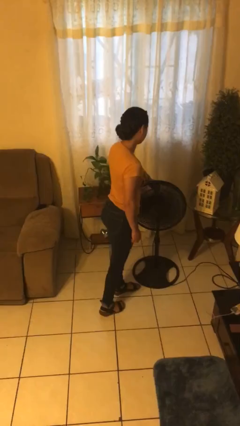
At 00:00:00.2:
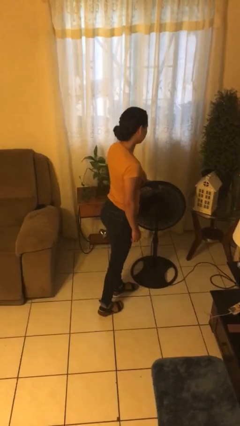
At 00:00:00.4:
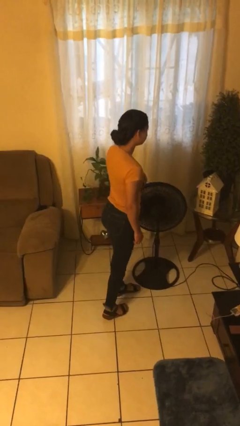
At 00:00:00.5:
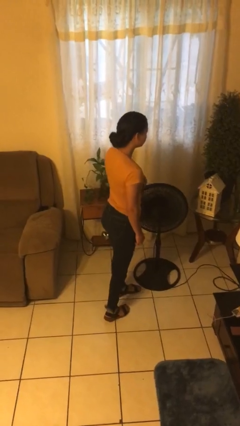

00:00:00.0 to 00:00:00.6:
person turns off fan

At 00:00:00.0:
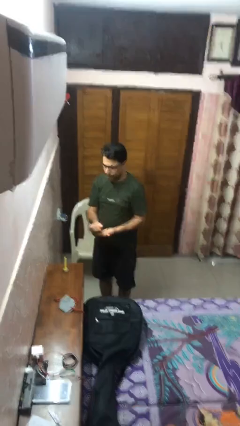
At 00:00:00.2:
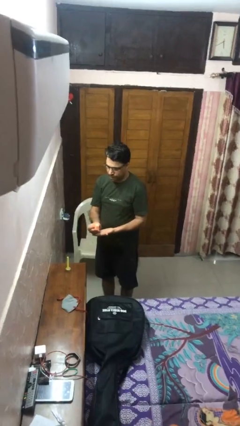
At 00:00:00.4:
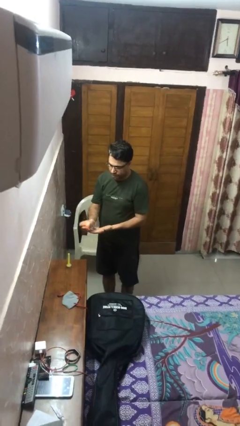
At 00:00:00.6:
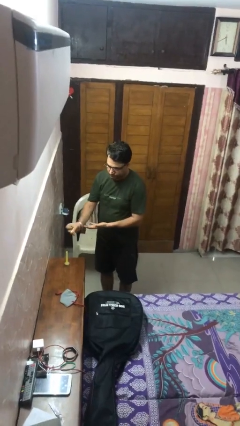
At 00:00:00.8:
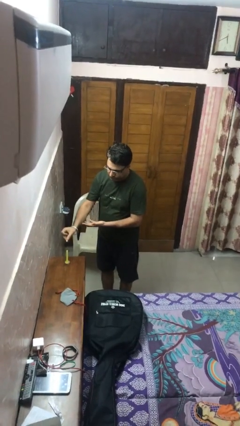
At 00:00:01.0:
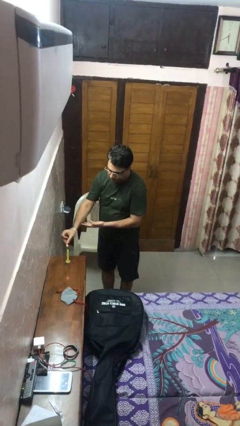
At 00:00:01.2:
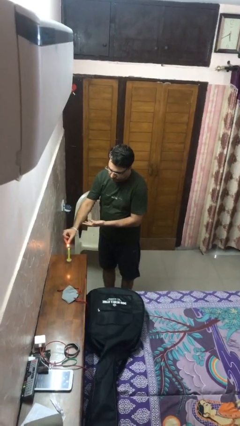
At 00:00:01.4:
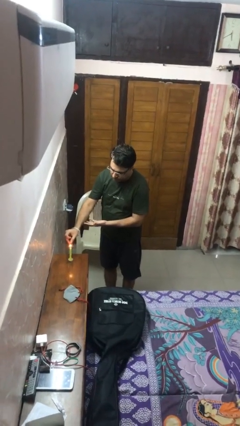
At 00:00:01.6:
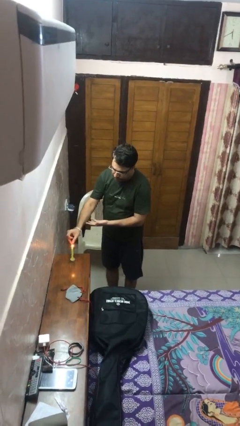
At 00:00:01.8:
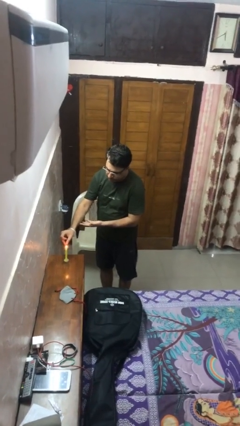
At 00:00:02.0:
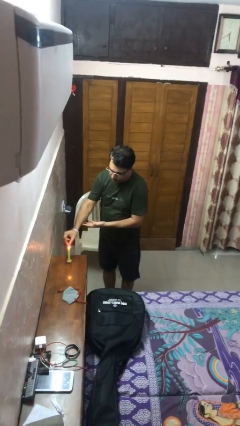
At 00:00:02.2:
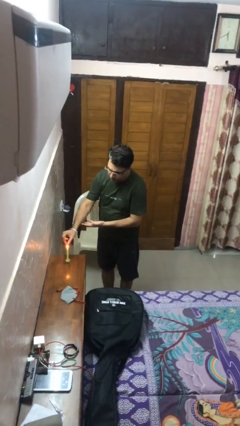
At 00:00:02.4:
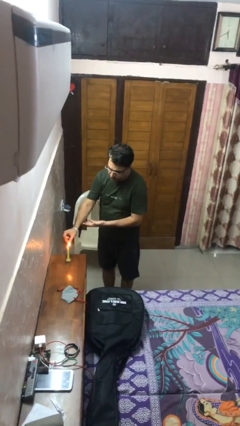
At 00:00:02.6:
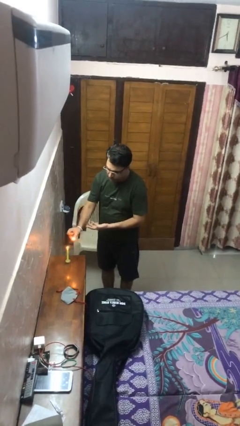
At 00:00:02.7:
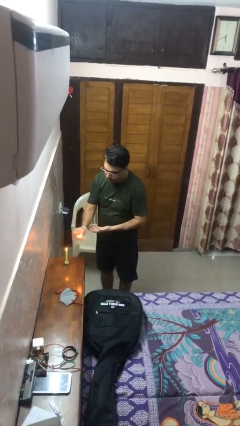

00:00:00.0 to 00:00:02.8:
person lights candle

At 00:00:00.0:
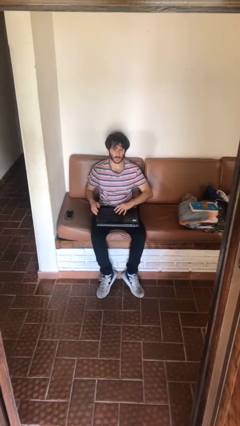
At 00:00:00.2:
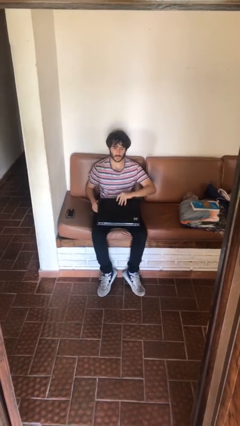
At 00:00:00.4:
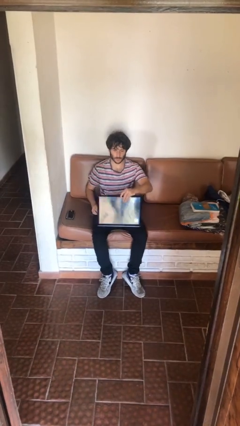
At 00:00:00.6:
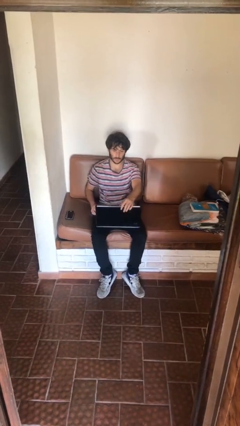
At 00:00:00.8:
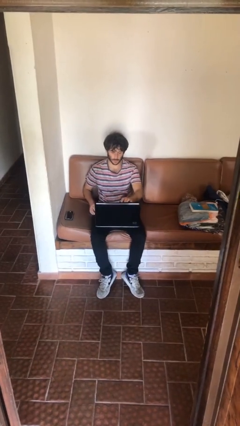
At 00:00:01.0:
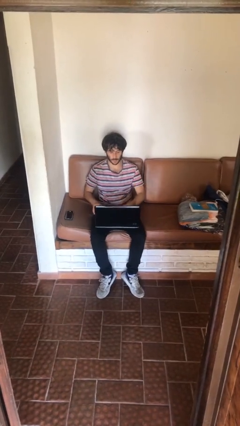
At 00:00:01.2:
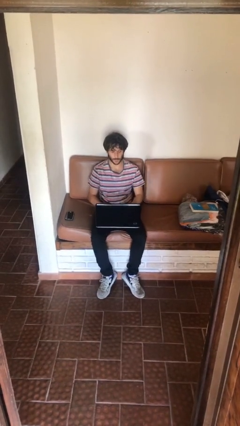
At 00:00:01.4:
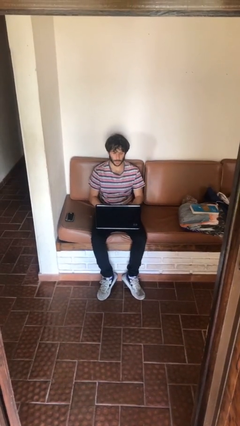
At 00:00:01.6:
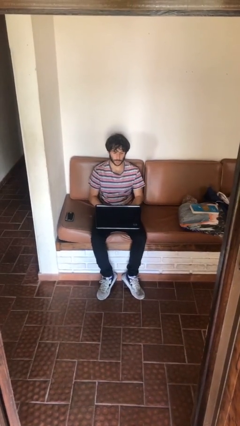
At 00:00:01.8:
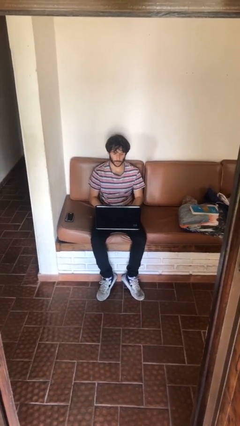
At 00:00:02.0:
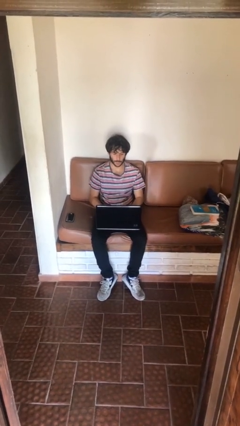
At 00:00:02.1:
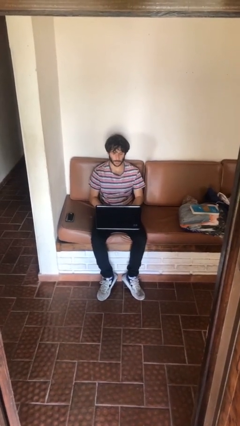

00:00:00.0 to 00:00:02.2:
person interacts with laptop

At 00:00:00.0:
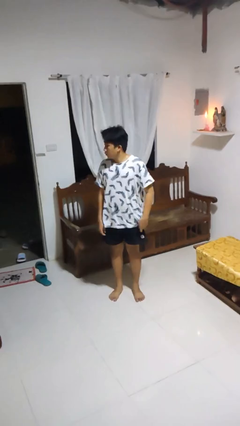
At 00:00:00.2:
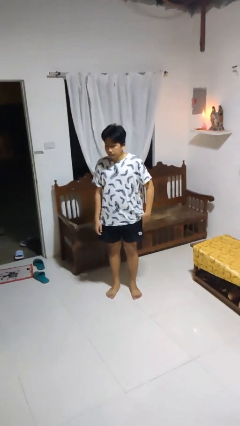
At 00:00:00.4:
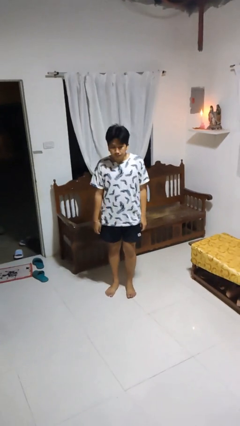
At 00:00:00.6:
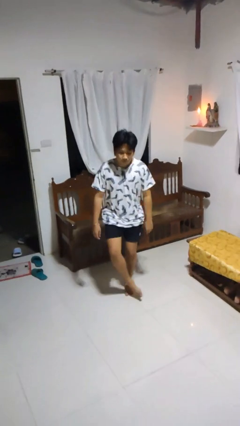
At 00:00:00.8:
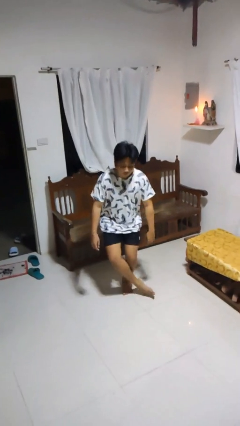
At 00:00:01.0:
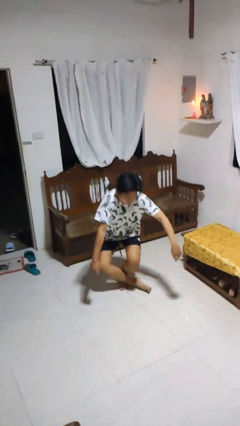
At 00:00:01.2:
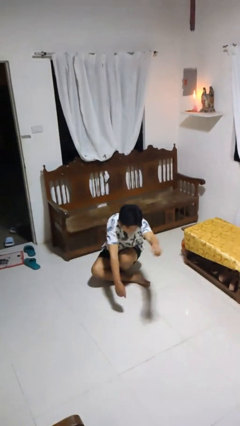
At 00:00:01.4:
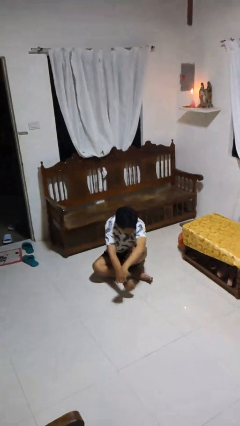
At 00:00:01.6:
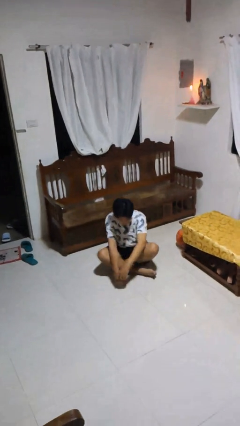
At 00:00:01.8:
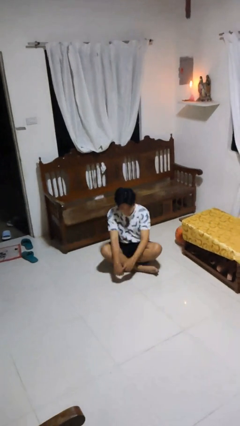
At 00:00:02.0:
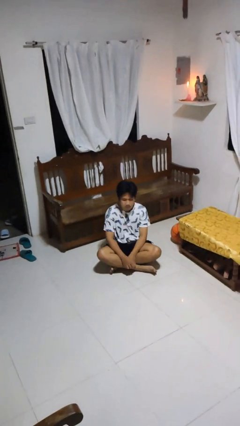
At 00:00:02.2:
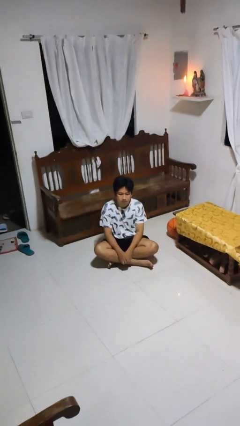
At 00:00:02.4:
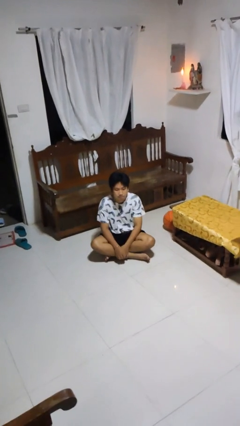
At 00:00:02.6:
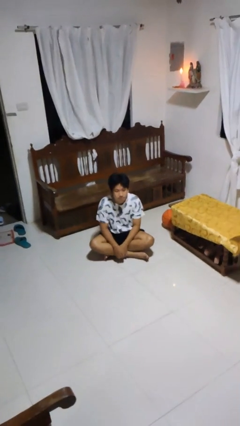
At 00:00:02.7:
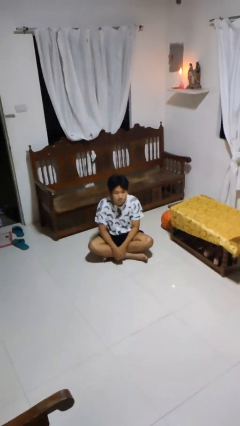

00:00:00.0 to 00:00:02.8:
person sits crisscross

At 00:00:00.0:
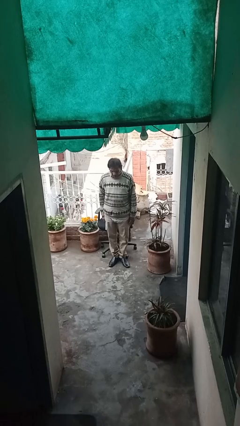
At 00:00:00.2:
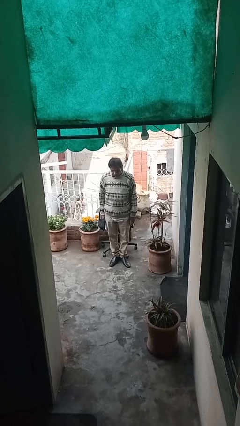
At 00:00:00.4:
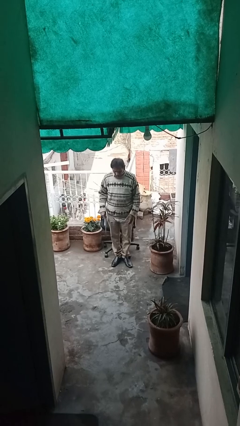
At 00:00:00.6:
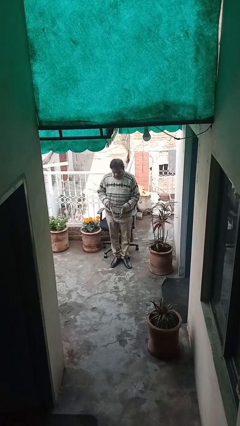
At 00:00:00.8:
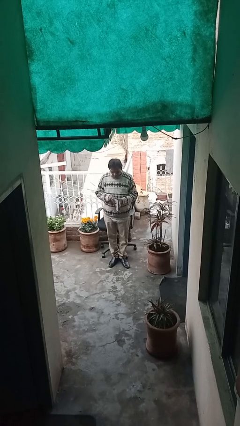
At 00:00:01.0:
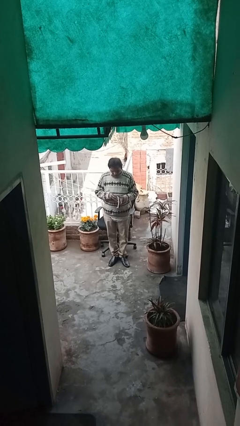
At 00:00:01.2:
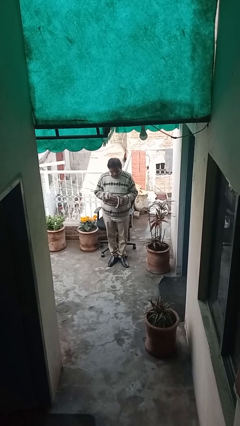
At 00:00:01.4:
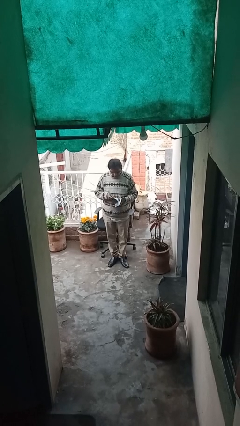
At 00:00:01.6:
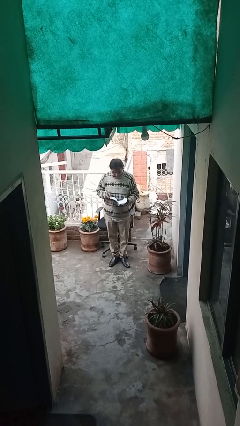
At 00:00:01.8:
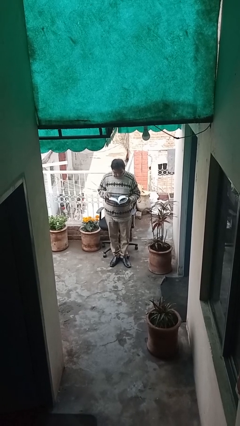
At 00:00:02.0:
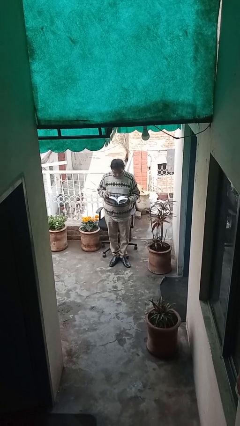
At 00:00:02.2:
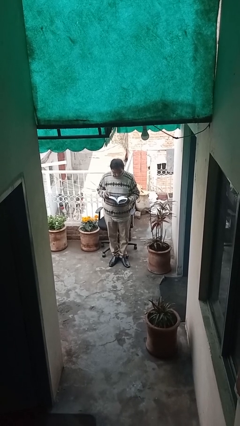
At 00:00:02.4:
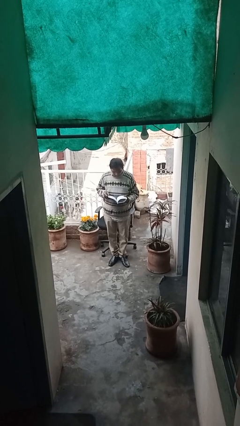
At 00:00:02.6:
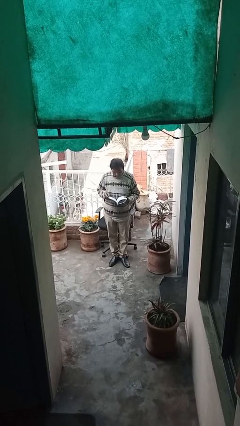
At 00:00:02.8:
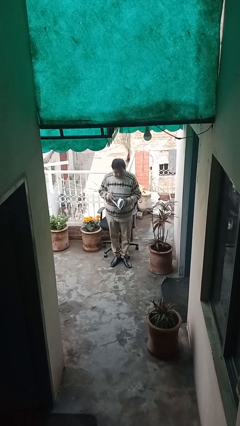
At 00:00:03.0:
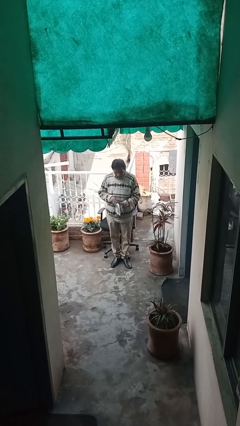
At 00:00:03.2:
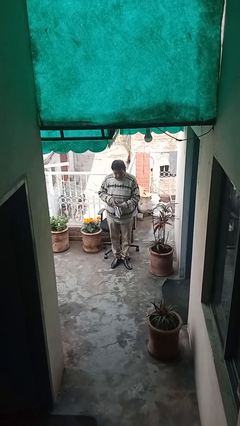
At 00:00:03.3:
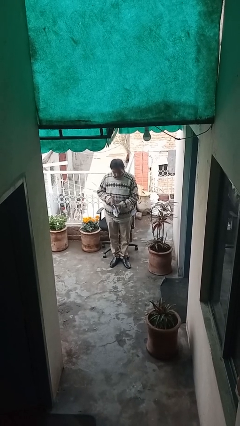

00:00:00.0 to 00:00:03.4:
person reads document

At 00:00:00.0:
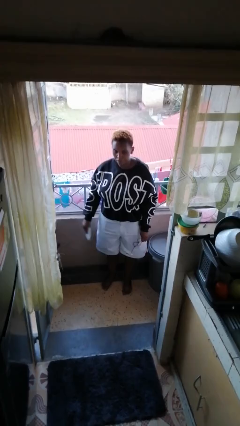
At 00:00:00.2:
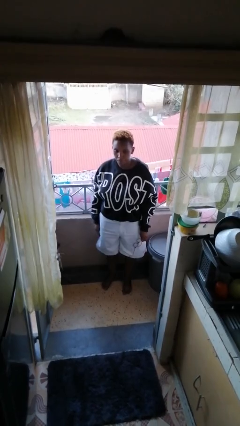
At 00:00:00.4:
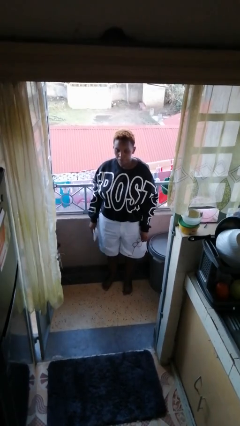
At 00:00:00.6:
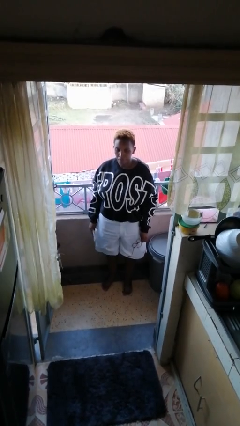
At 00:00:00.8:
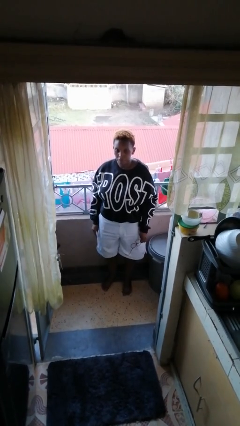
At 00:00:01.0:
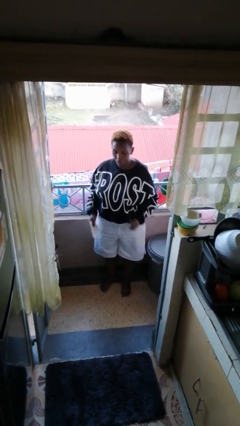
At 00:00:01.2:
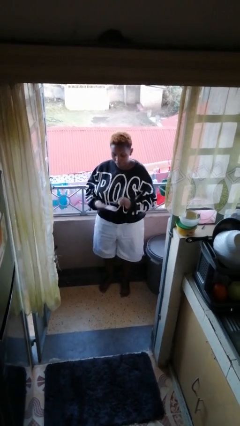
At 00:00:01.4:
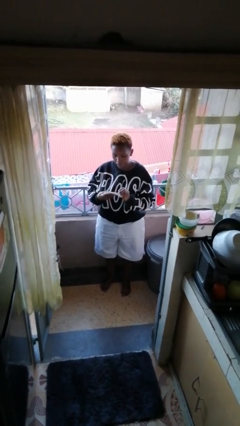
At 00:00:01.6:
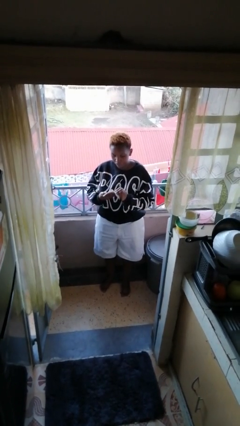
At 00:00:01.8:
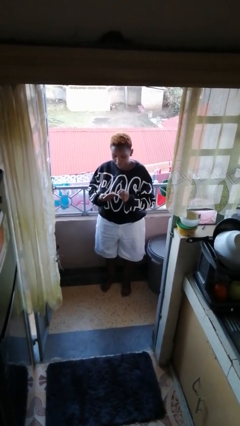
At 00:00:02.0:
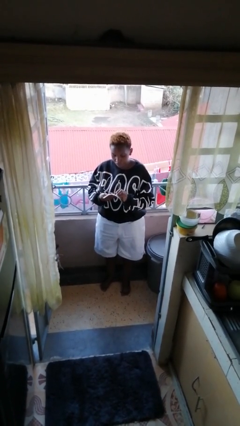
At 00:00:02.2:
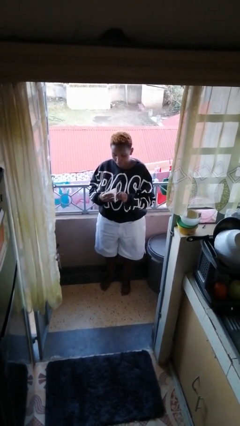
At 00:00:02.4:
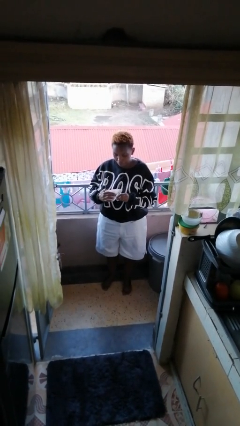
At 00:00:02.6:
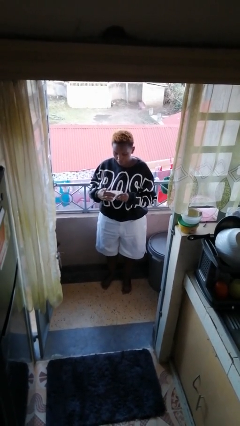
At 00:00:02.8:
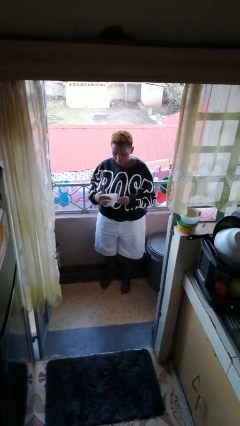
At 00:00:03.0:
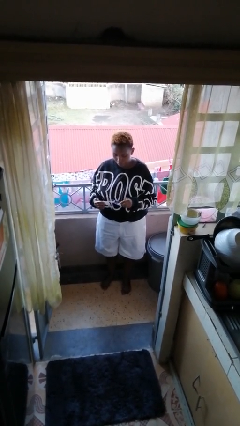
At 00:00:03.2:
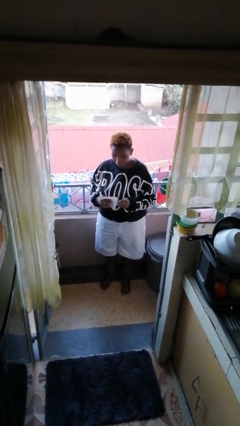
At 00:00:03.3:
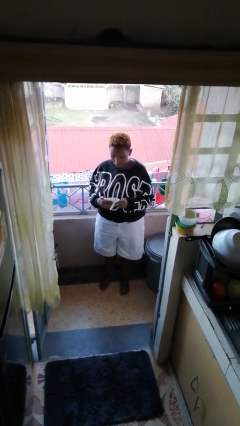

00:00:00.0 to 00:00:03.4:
person cleans eyeglasses

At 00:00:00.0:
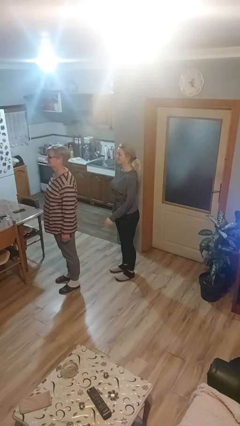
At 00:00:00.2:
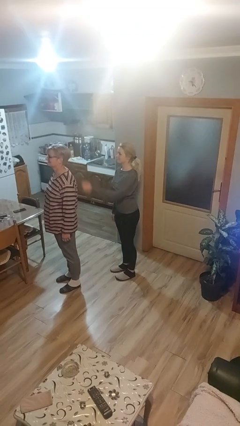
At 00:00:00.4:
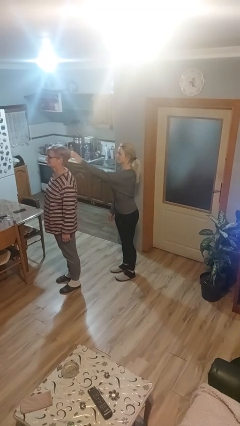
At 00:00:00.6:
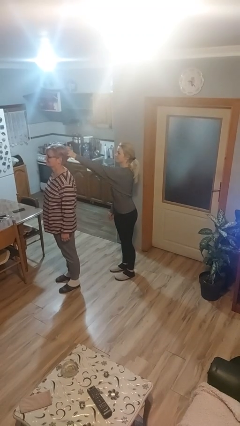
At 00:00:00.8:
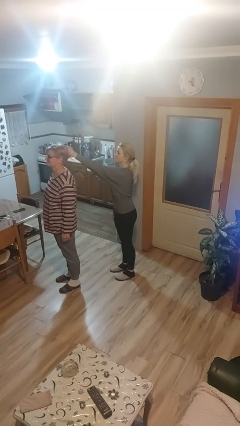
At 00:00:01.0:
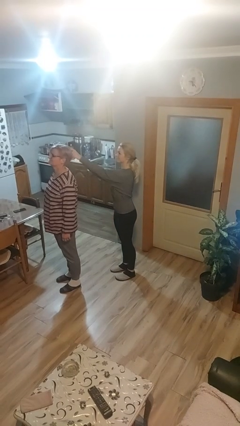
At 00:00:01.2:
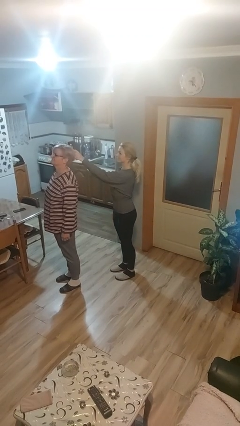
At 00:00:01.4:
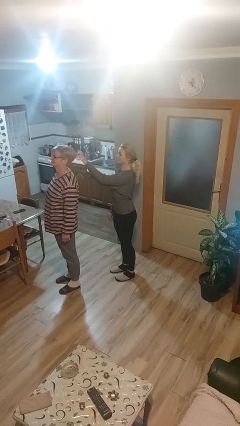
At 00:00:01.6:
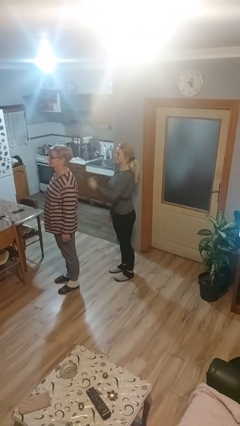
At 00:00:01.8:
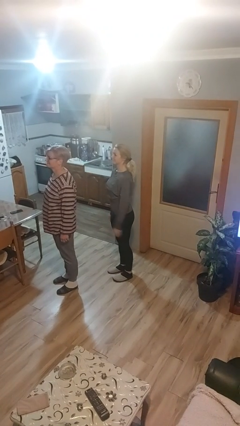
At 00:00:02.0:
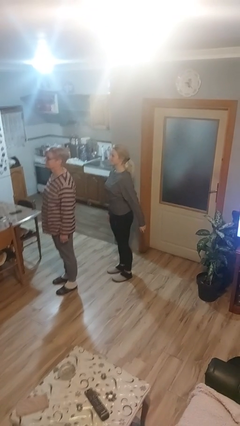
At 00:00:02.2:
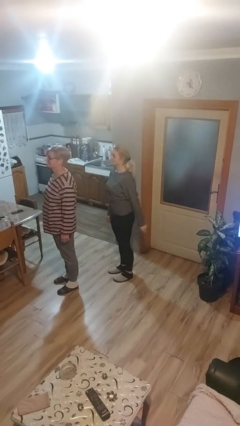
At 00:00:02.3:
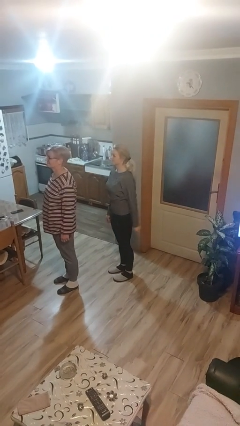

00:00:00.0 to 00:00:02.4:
person grabs person by hair
